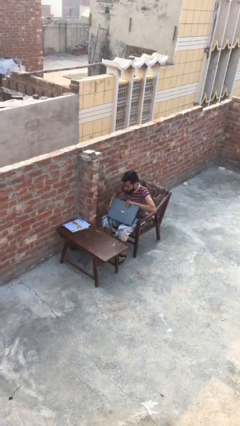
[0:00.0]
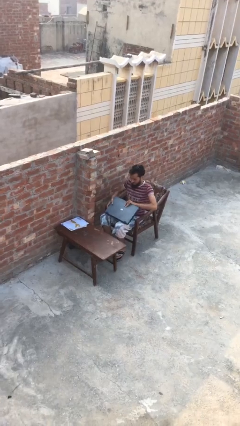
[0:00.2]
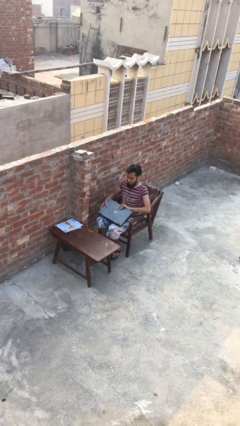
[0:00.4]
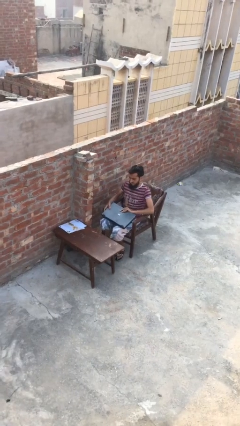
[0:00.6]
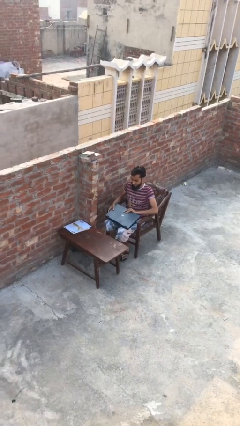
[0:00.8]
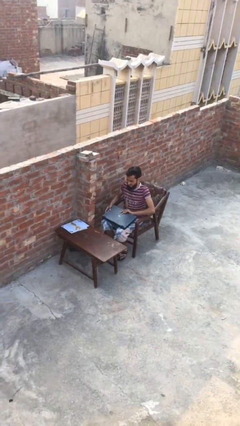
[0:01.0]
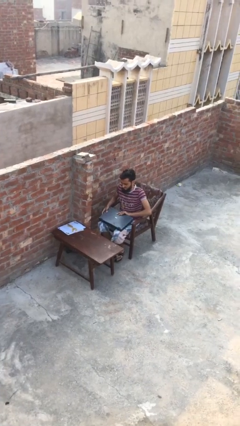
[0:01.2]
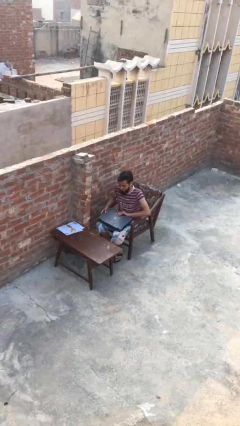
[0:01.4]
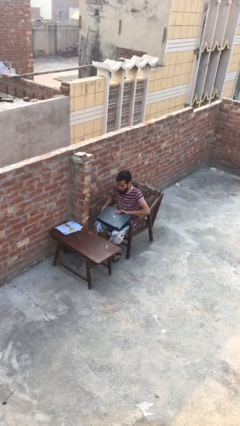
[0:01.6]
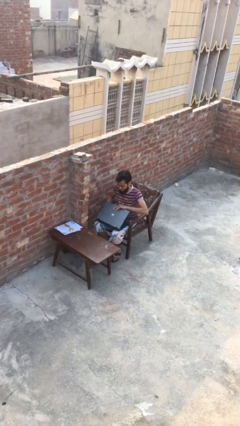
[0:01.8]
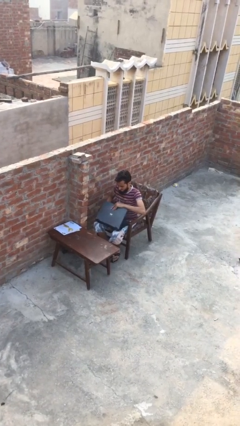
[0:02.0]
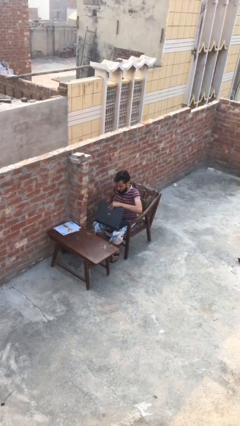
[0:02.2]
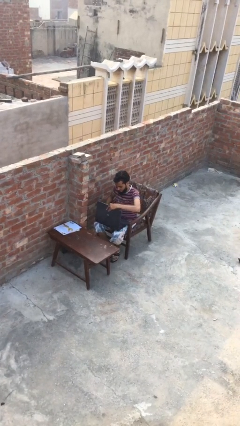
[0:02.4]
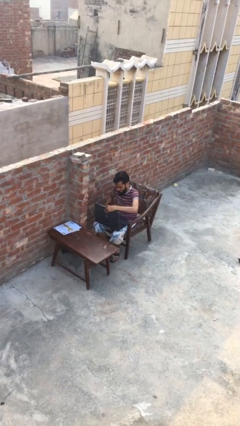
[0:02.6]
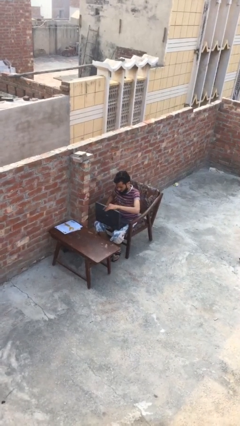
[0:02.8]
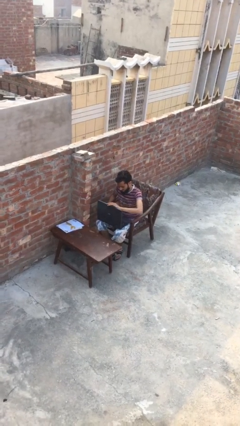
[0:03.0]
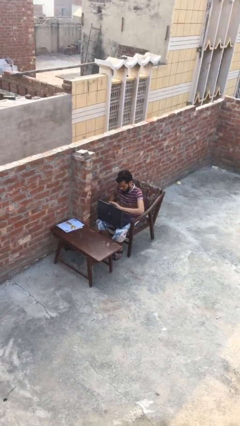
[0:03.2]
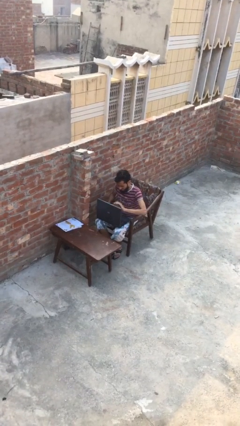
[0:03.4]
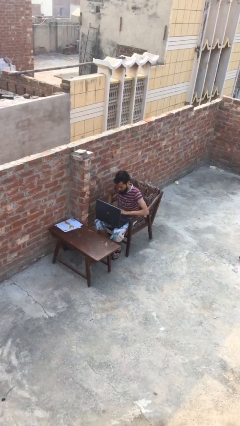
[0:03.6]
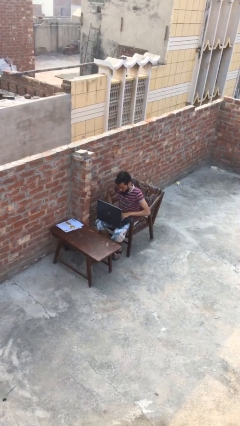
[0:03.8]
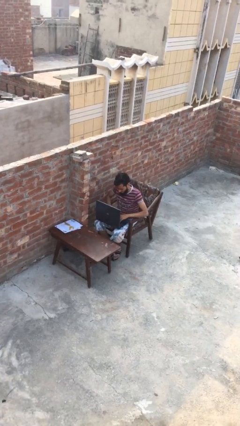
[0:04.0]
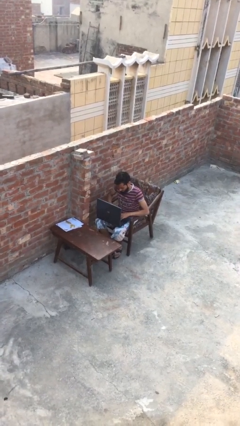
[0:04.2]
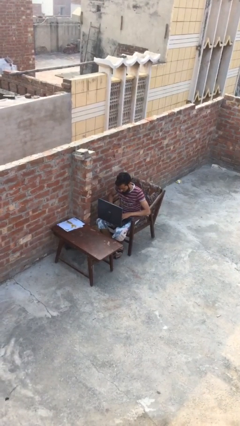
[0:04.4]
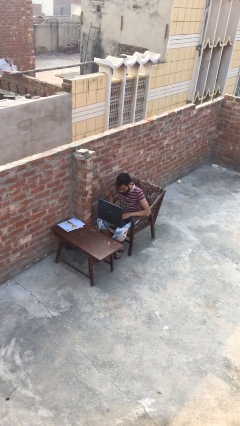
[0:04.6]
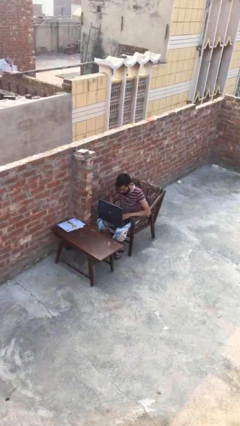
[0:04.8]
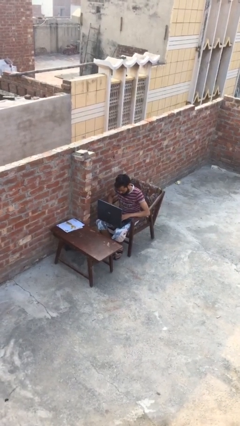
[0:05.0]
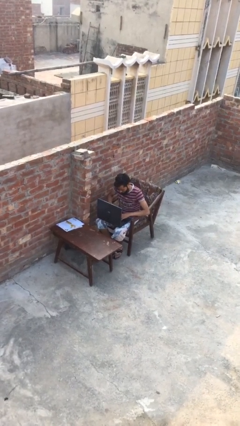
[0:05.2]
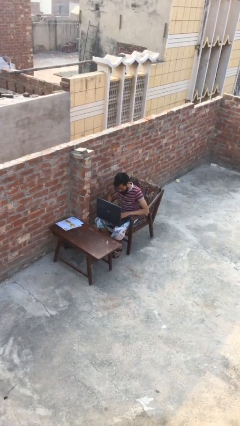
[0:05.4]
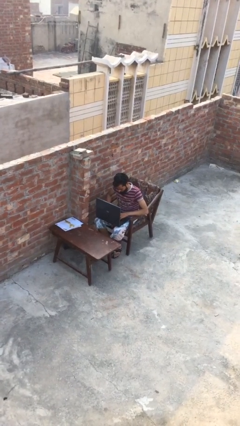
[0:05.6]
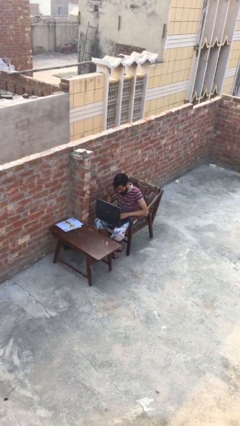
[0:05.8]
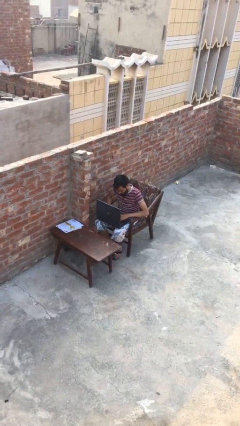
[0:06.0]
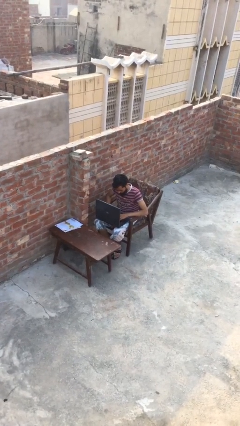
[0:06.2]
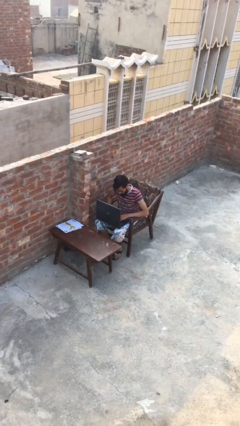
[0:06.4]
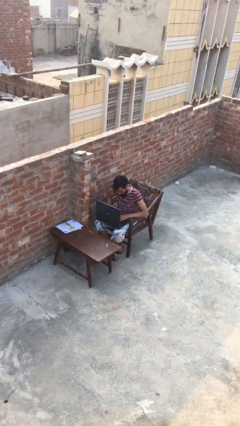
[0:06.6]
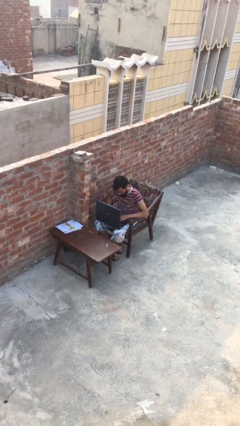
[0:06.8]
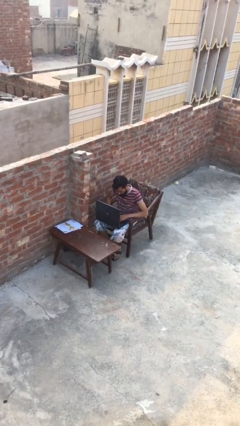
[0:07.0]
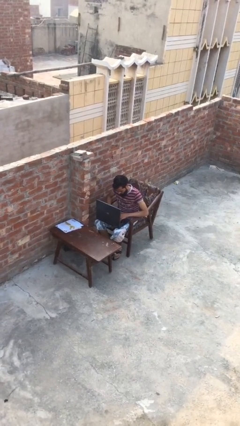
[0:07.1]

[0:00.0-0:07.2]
person interacts with laptop

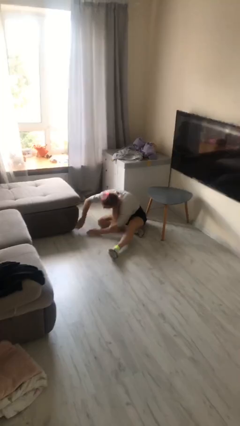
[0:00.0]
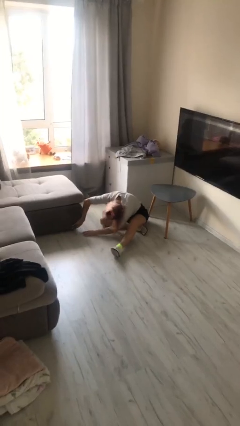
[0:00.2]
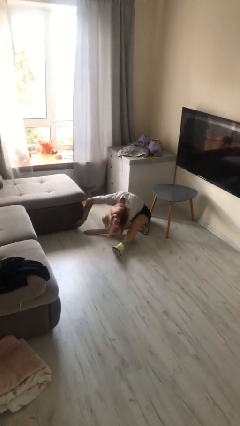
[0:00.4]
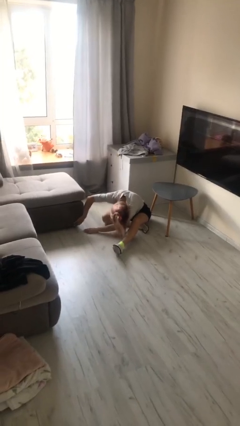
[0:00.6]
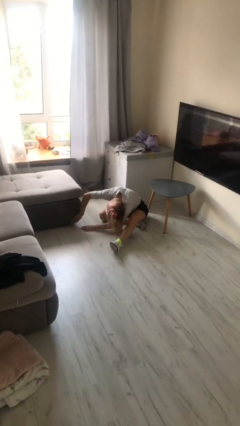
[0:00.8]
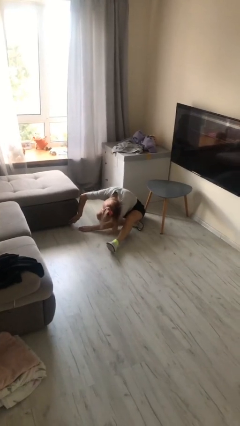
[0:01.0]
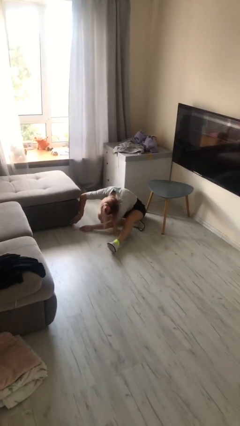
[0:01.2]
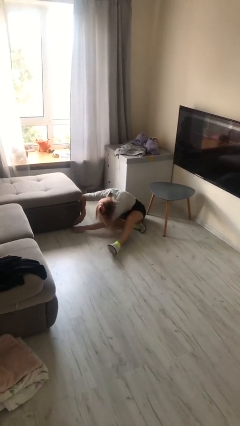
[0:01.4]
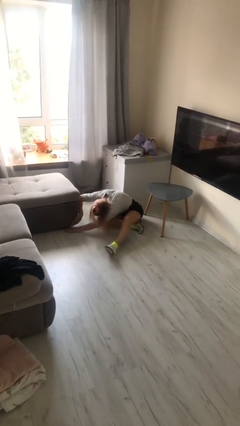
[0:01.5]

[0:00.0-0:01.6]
person searches under couch

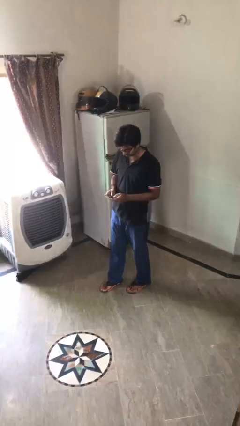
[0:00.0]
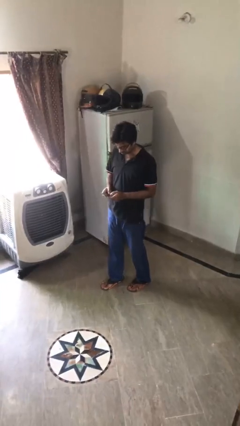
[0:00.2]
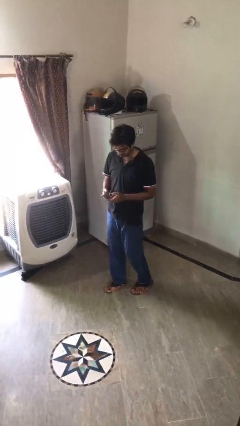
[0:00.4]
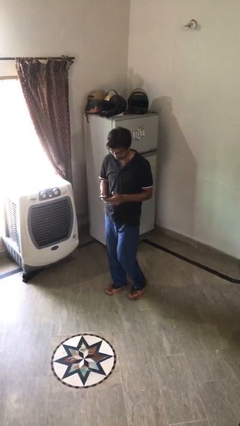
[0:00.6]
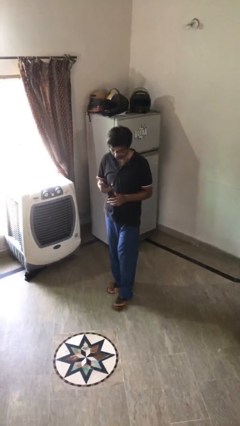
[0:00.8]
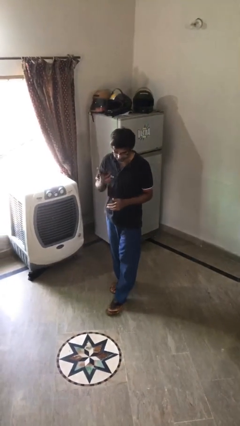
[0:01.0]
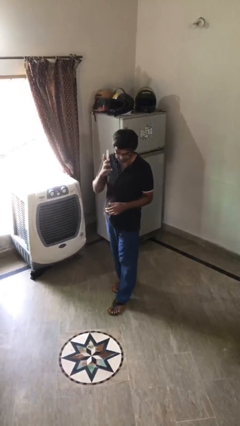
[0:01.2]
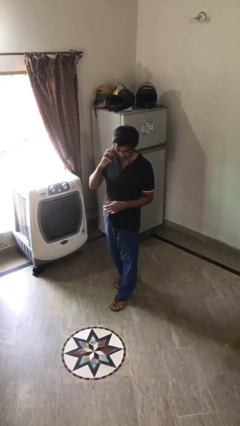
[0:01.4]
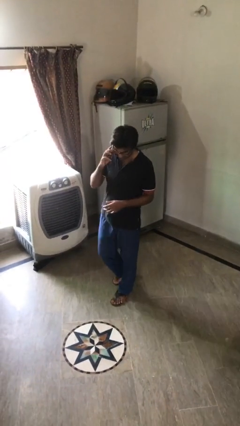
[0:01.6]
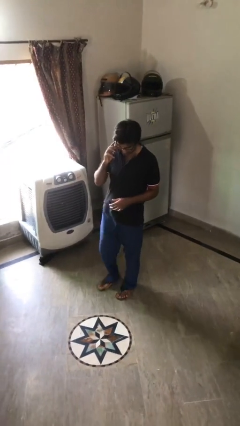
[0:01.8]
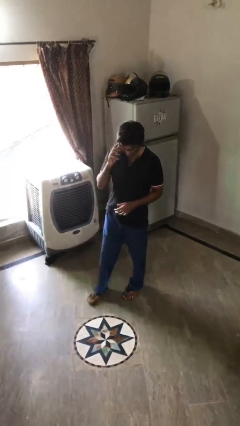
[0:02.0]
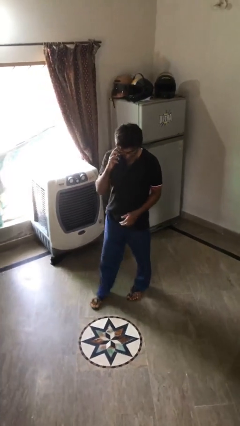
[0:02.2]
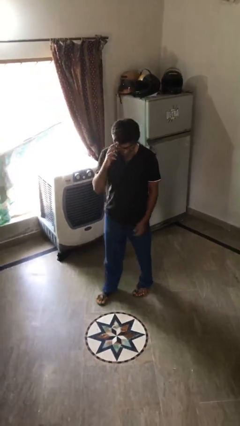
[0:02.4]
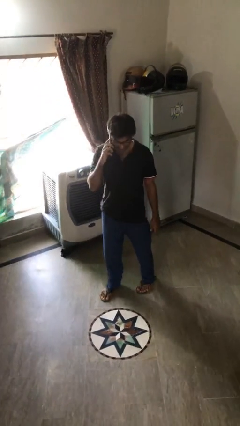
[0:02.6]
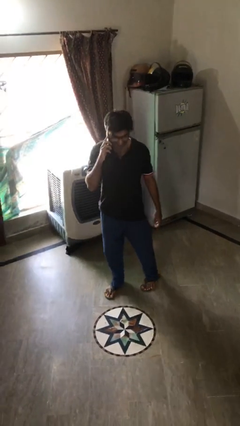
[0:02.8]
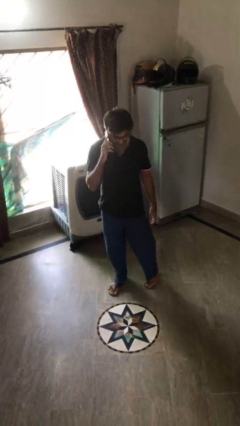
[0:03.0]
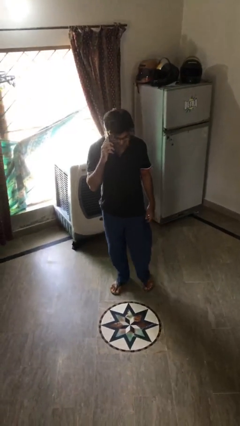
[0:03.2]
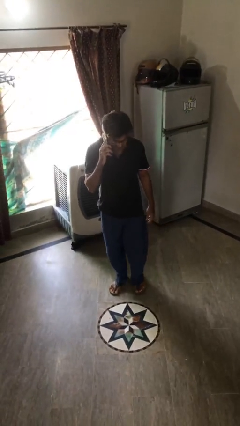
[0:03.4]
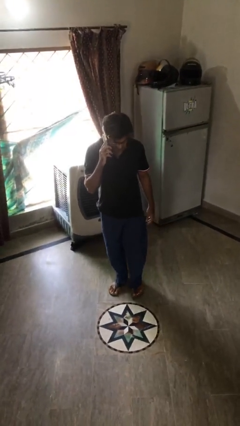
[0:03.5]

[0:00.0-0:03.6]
person talks on phone

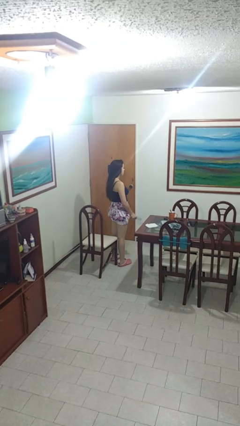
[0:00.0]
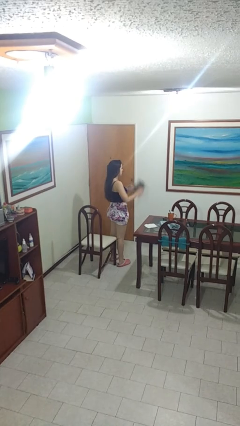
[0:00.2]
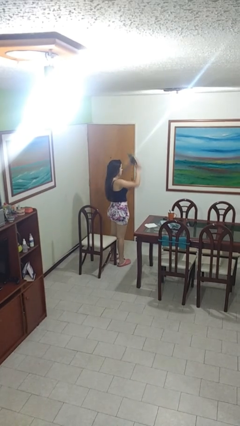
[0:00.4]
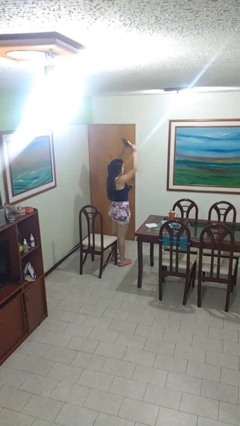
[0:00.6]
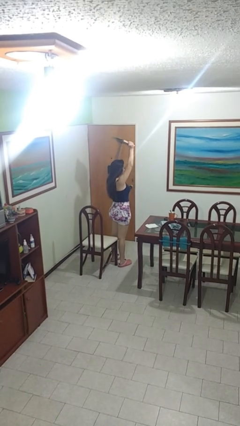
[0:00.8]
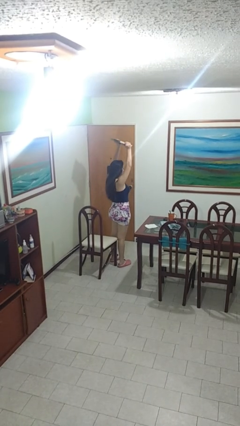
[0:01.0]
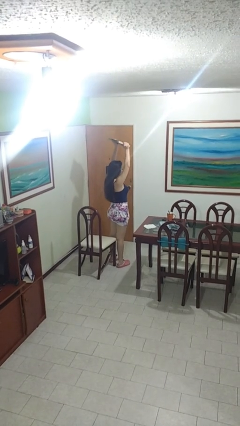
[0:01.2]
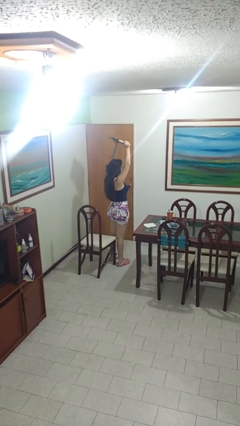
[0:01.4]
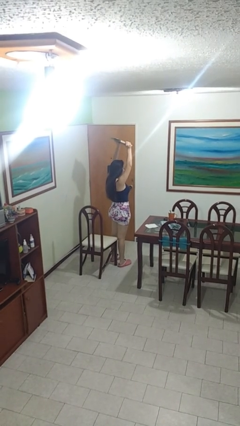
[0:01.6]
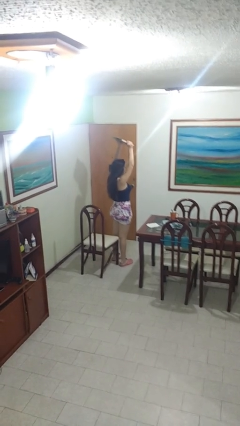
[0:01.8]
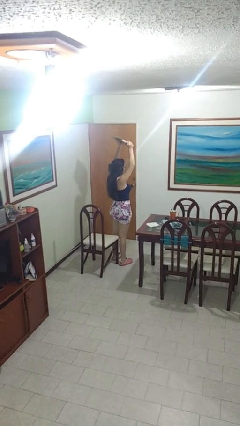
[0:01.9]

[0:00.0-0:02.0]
person holds object above head

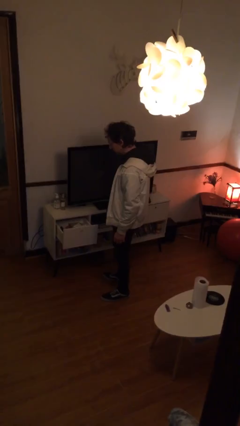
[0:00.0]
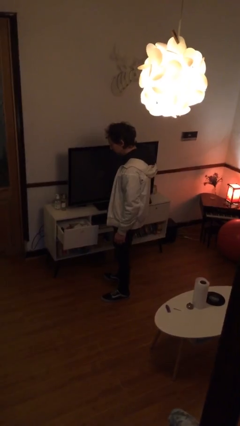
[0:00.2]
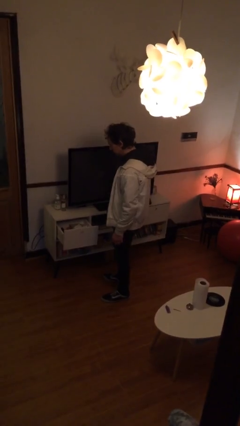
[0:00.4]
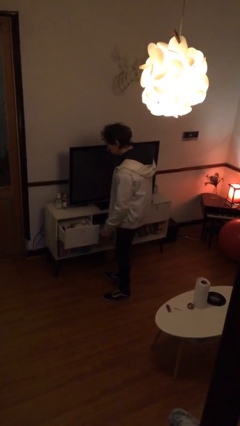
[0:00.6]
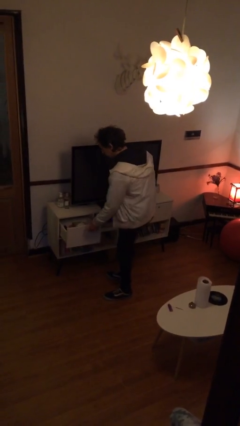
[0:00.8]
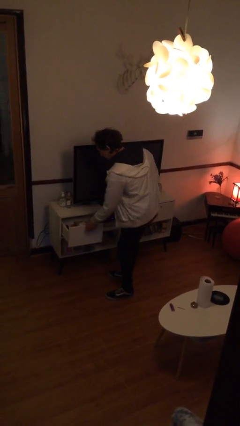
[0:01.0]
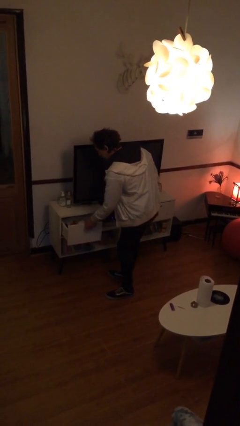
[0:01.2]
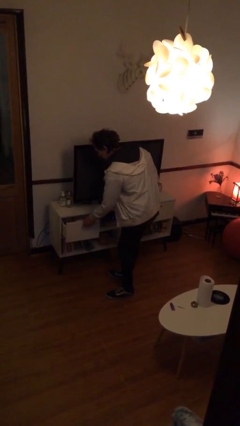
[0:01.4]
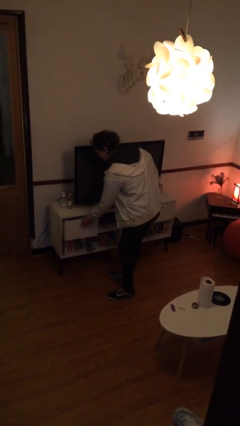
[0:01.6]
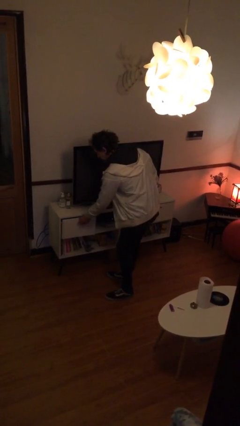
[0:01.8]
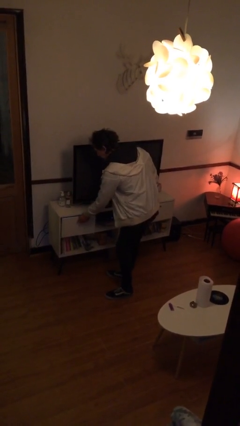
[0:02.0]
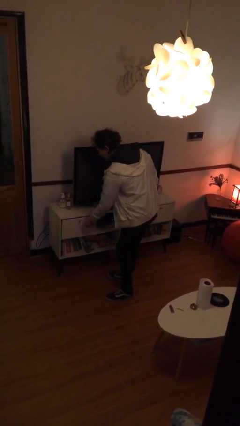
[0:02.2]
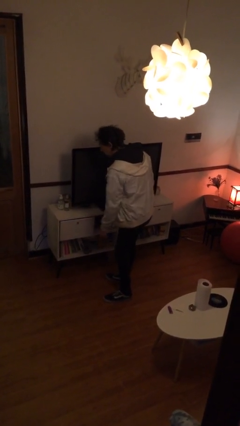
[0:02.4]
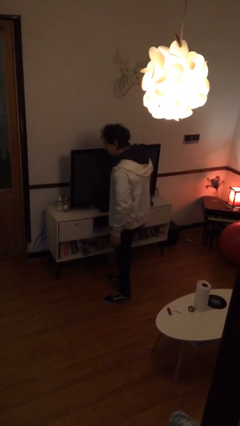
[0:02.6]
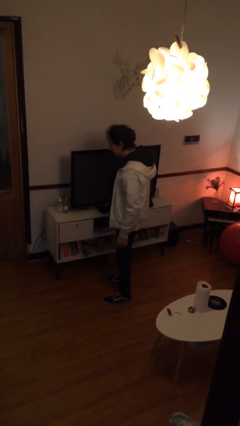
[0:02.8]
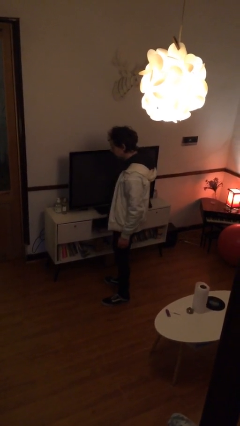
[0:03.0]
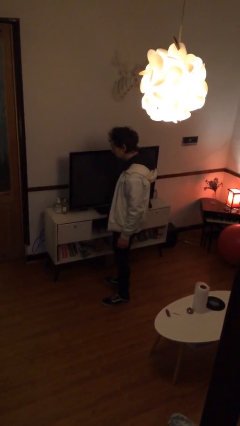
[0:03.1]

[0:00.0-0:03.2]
person closes dresser drawer
